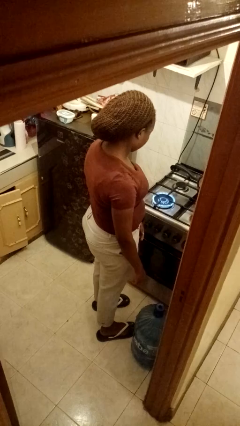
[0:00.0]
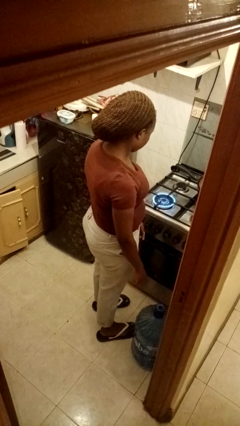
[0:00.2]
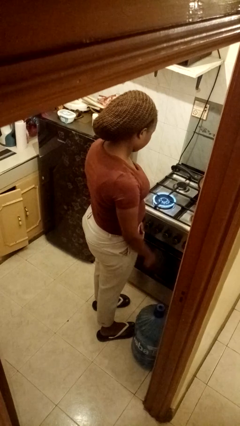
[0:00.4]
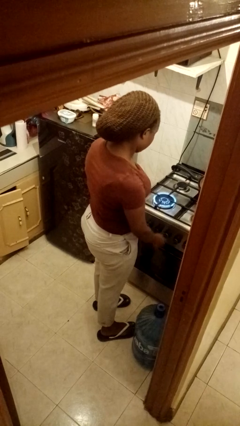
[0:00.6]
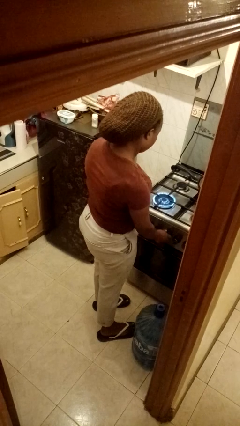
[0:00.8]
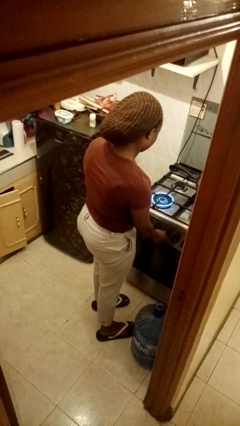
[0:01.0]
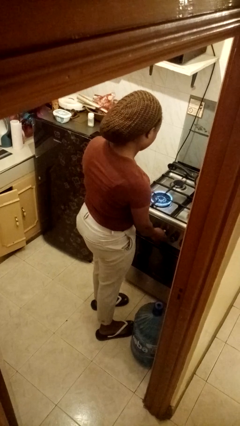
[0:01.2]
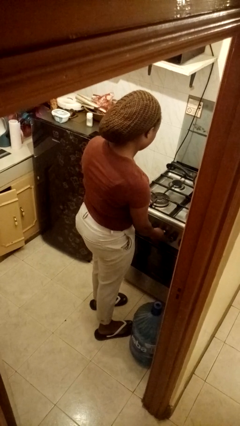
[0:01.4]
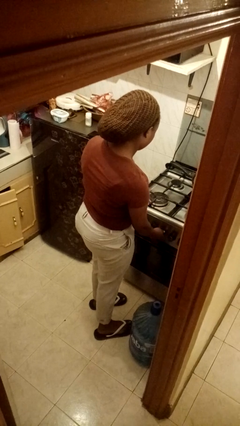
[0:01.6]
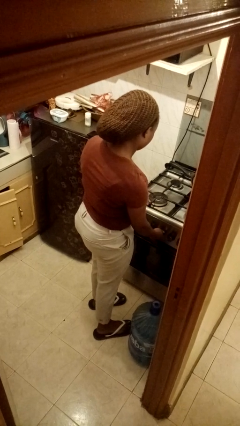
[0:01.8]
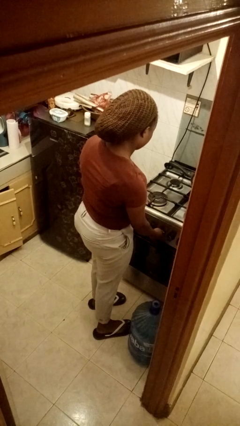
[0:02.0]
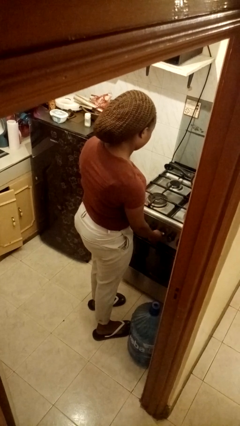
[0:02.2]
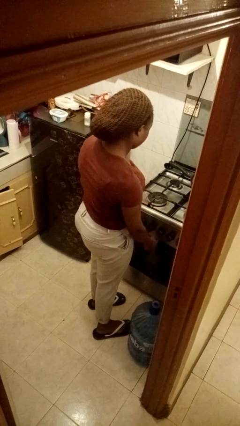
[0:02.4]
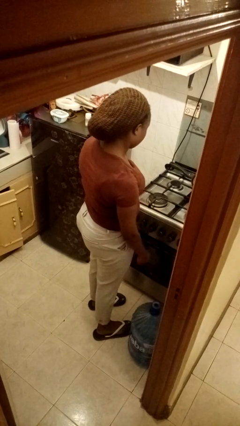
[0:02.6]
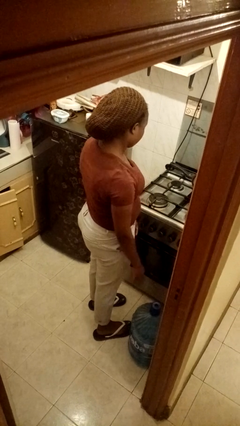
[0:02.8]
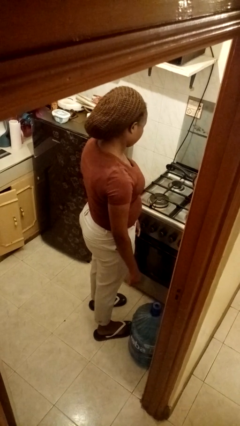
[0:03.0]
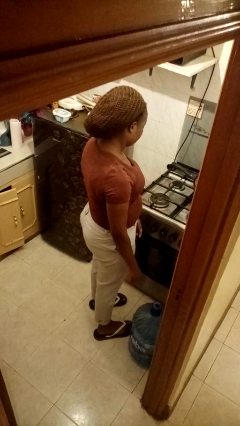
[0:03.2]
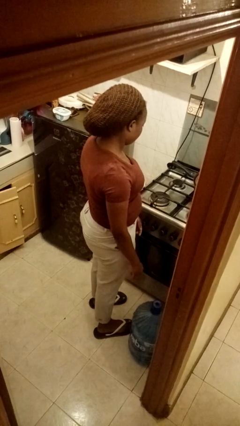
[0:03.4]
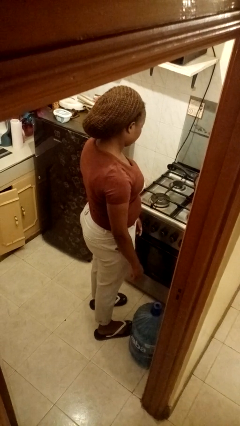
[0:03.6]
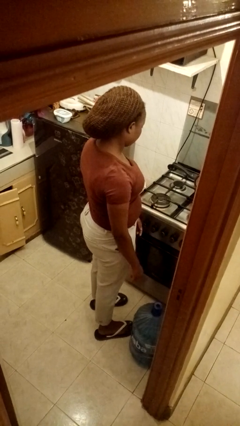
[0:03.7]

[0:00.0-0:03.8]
person turns off stovetop

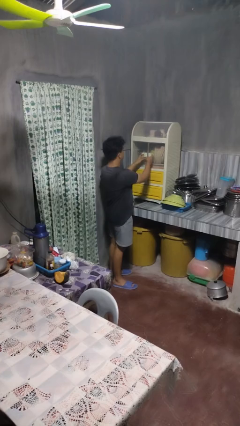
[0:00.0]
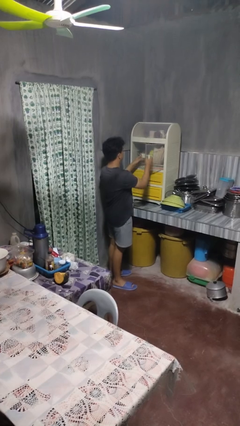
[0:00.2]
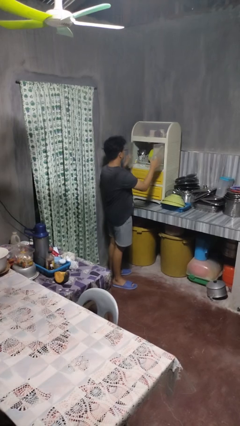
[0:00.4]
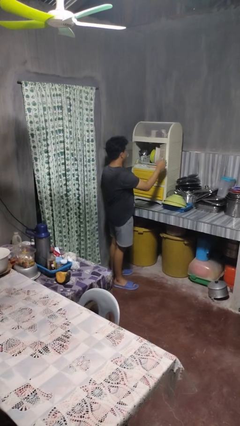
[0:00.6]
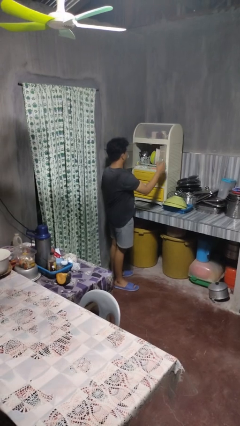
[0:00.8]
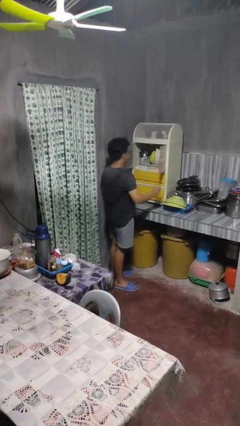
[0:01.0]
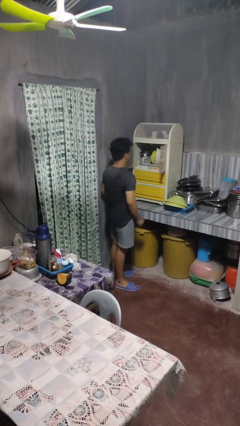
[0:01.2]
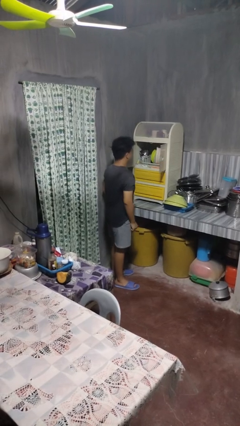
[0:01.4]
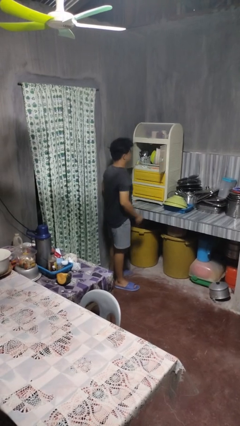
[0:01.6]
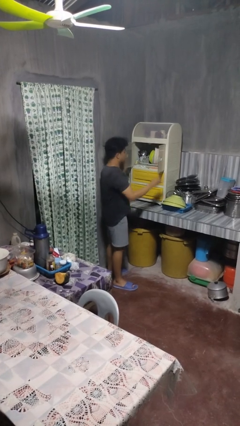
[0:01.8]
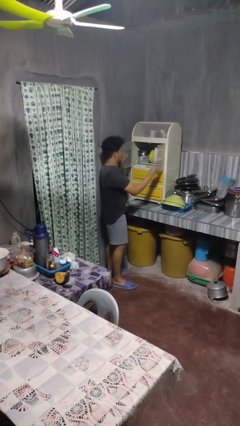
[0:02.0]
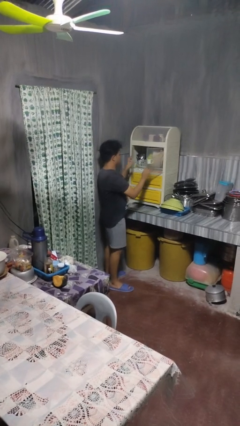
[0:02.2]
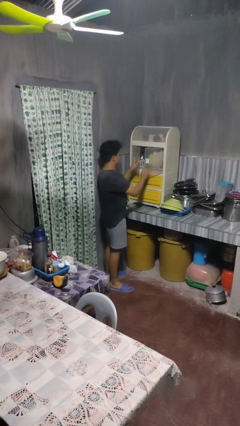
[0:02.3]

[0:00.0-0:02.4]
person opens cabinet

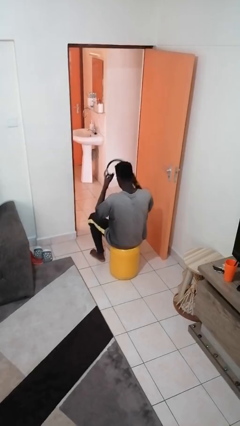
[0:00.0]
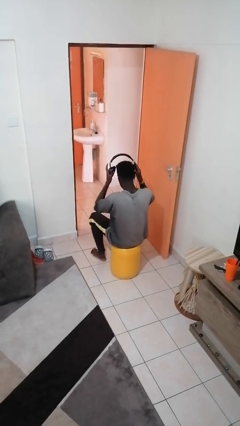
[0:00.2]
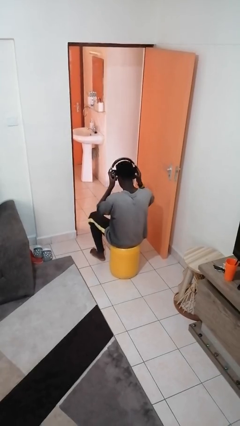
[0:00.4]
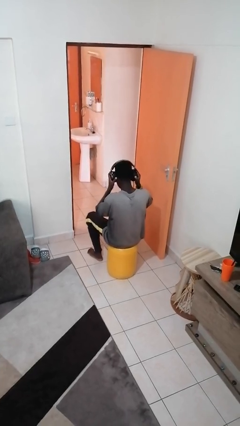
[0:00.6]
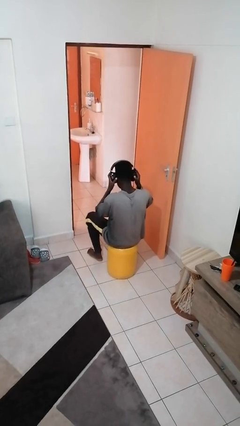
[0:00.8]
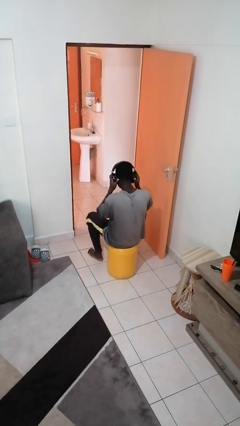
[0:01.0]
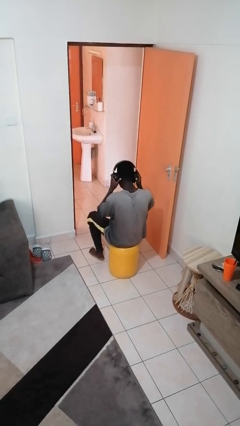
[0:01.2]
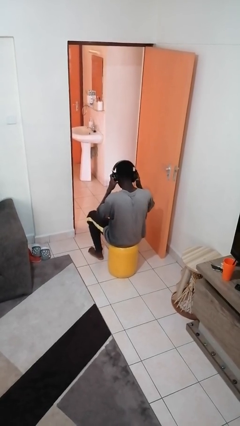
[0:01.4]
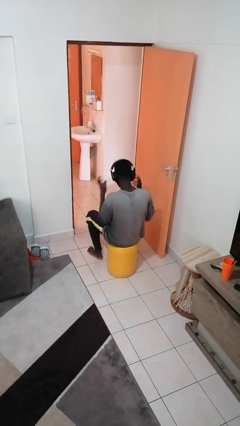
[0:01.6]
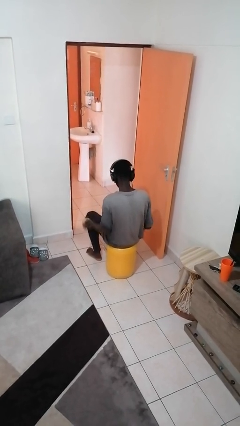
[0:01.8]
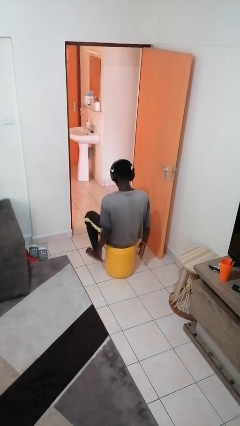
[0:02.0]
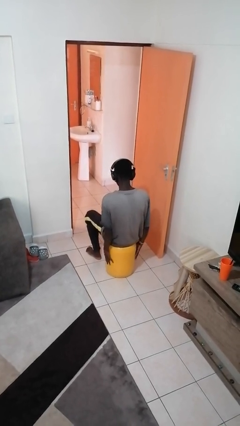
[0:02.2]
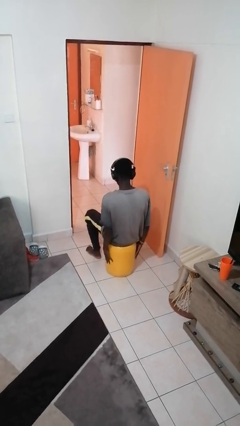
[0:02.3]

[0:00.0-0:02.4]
person puts on headphones

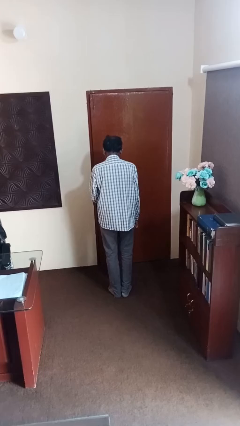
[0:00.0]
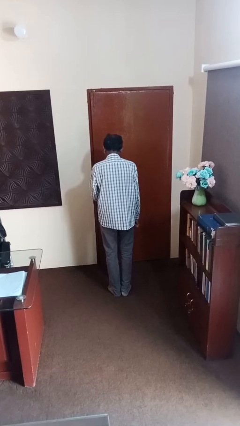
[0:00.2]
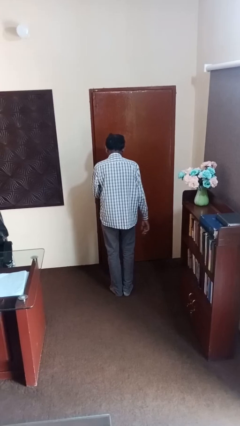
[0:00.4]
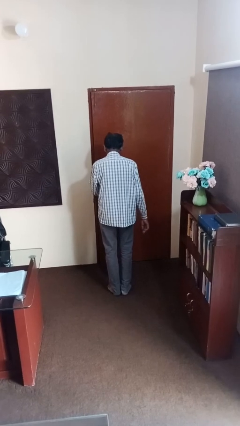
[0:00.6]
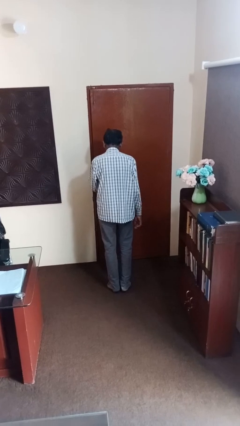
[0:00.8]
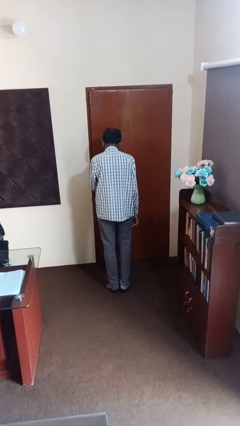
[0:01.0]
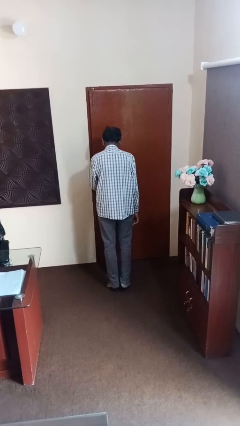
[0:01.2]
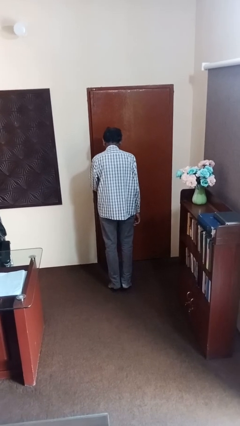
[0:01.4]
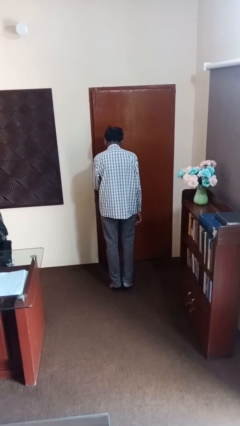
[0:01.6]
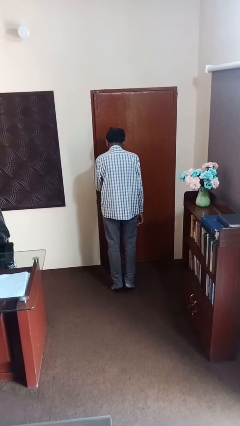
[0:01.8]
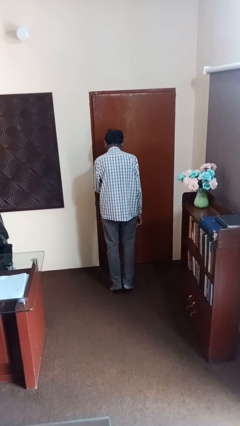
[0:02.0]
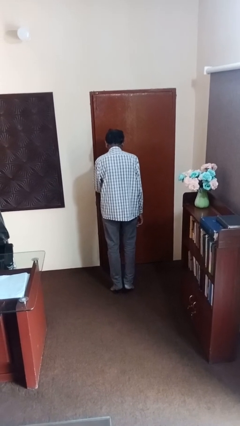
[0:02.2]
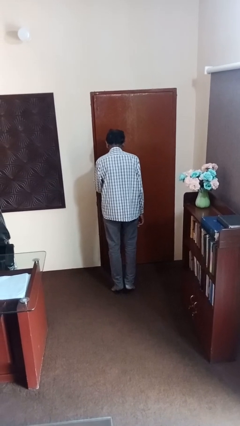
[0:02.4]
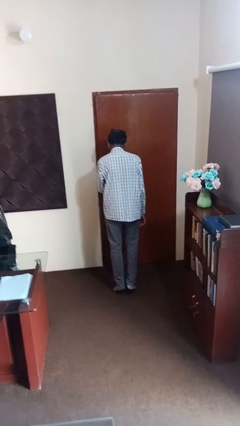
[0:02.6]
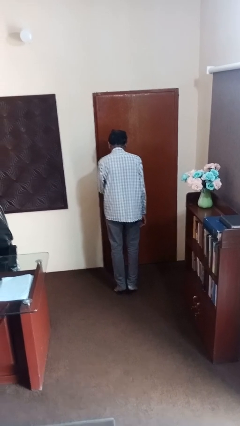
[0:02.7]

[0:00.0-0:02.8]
person walks tiptoe

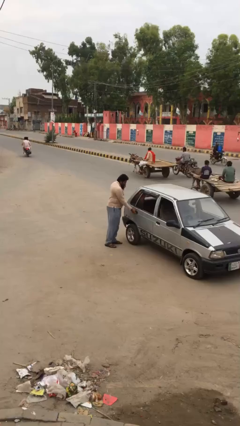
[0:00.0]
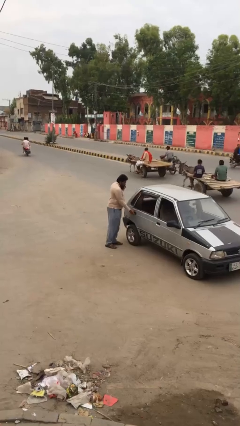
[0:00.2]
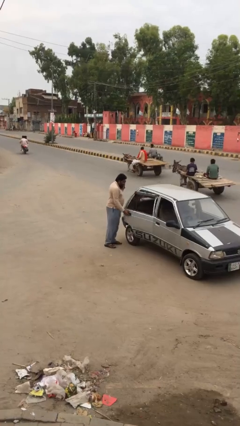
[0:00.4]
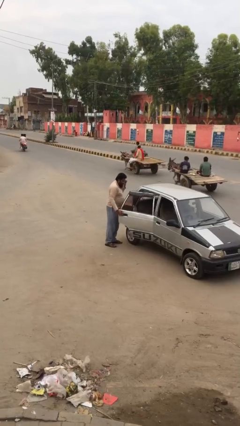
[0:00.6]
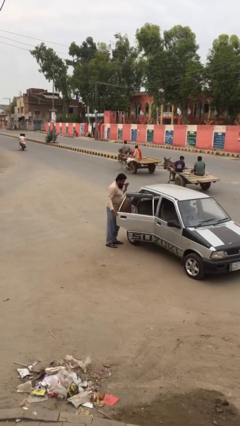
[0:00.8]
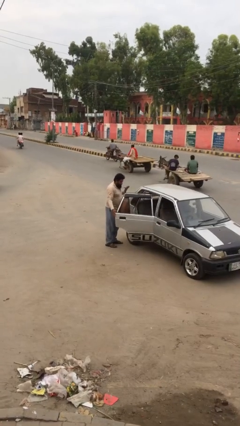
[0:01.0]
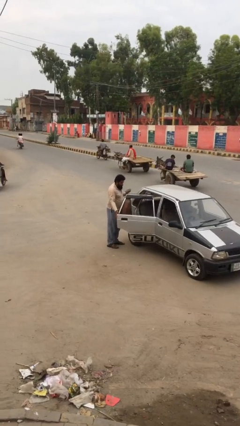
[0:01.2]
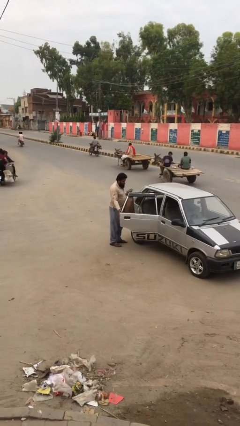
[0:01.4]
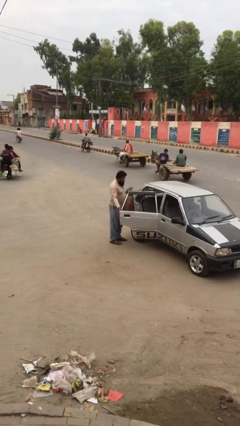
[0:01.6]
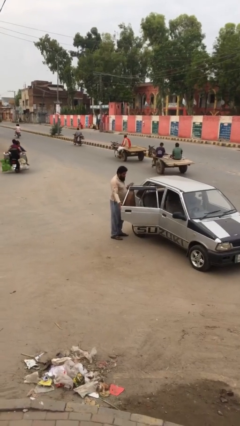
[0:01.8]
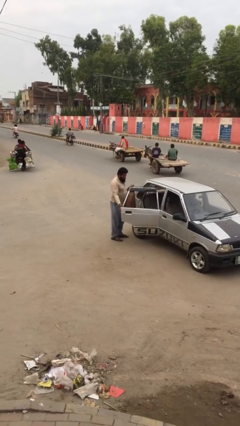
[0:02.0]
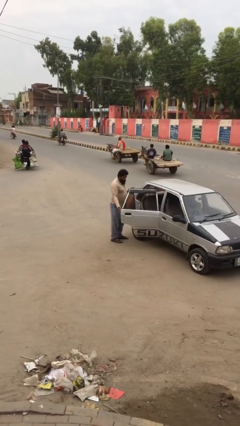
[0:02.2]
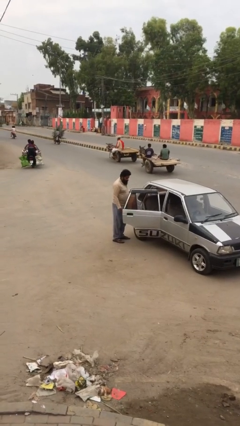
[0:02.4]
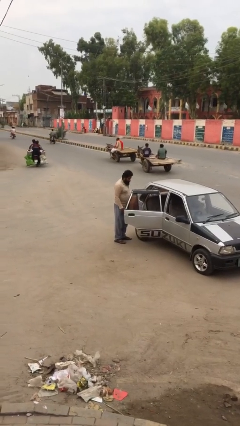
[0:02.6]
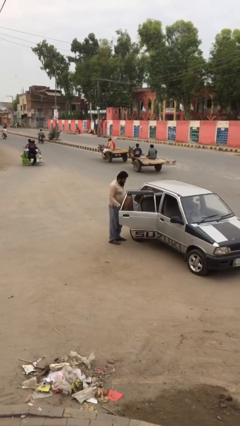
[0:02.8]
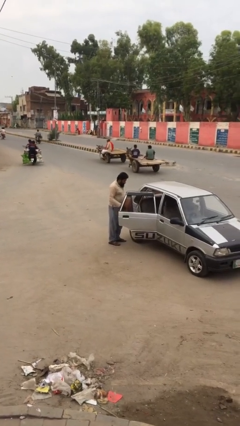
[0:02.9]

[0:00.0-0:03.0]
person opens car door

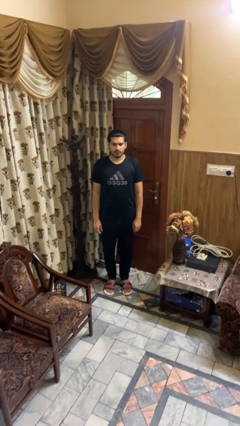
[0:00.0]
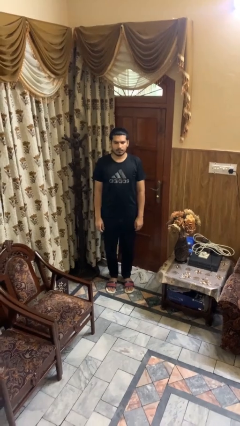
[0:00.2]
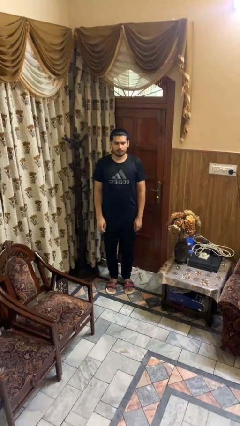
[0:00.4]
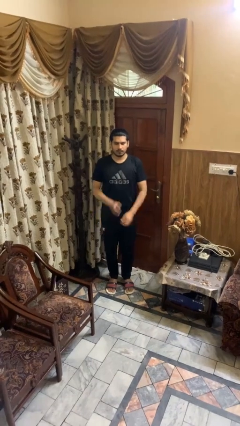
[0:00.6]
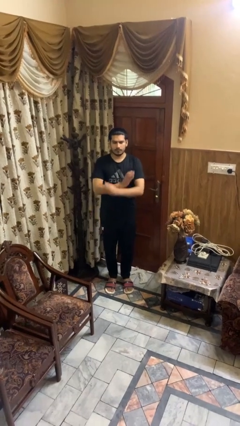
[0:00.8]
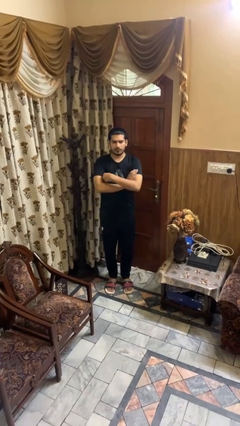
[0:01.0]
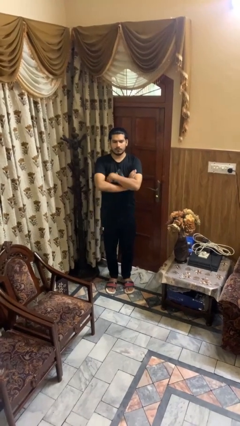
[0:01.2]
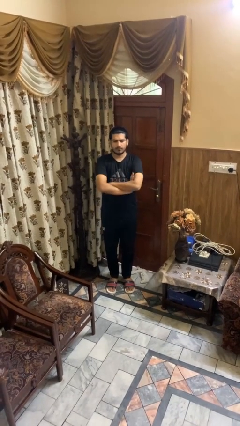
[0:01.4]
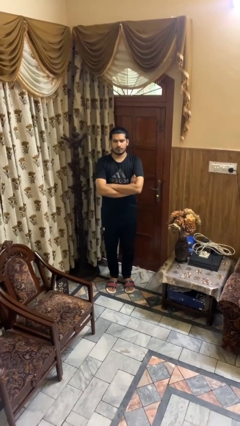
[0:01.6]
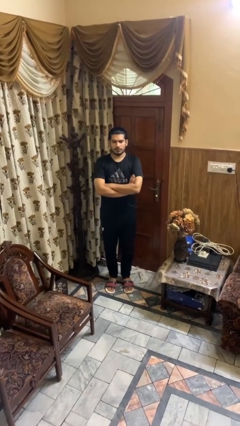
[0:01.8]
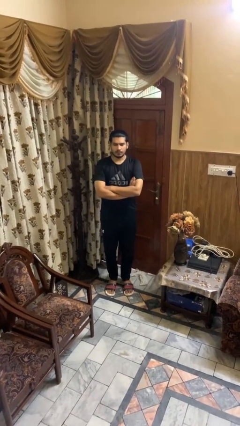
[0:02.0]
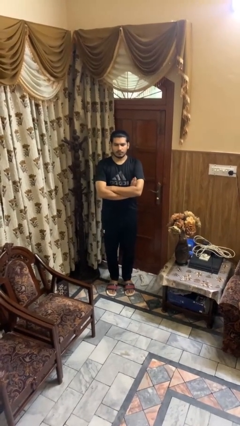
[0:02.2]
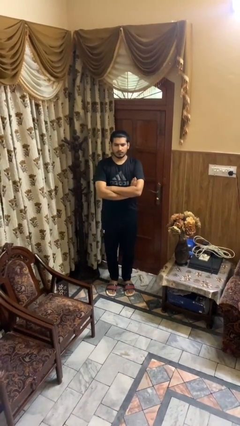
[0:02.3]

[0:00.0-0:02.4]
person crosses arms

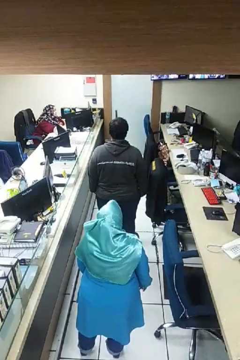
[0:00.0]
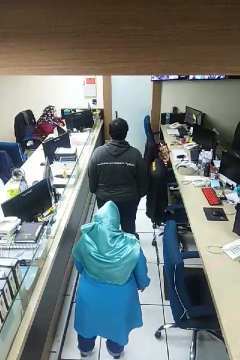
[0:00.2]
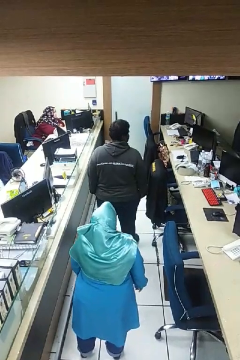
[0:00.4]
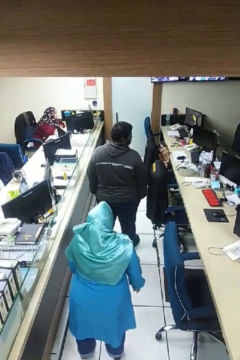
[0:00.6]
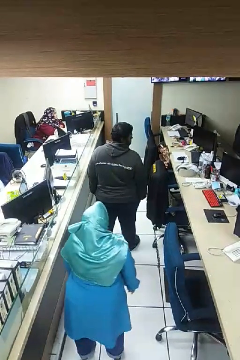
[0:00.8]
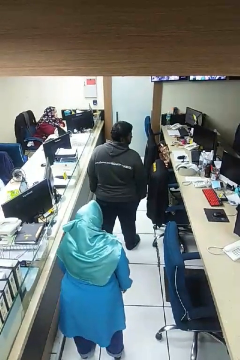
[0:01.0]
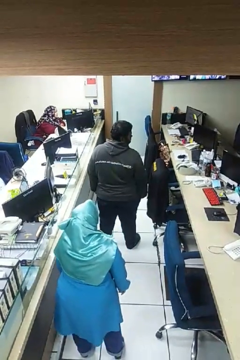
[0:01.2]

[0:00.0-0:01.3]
person looks over shoulder
